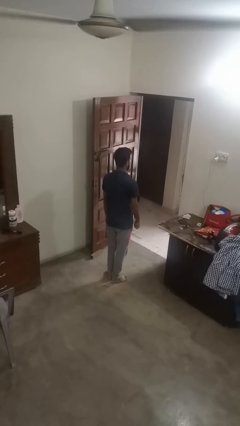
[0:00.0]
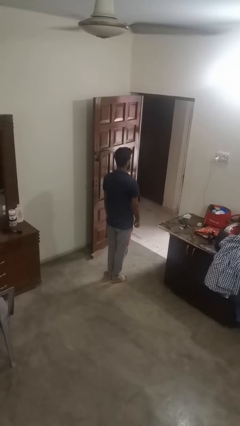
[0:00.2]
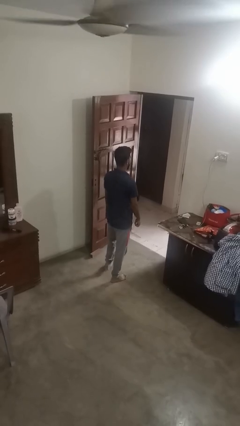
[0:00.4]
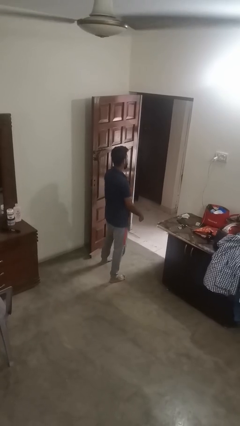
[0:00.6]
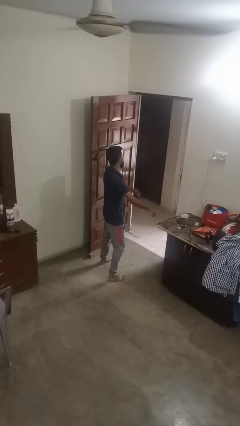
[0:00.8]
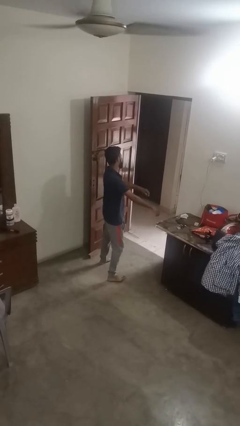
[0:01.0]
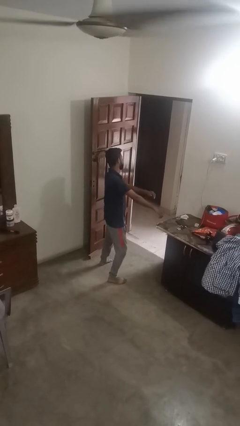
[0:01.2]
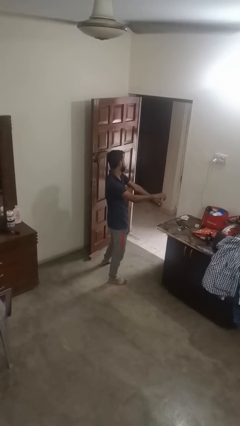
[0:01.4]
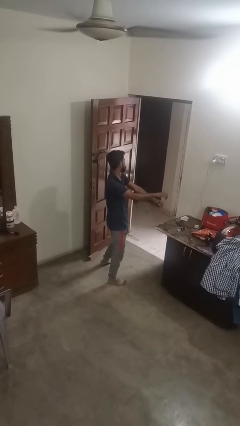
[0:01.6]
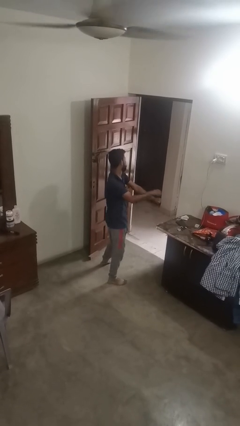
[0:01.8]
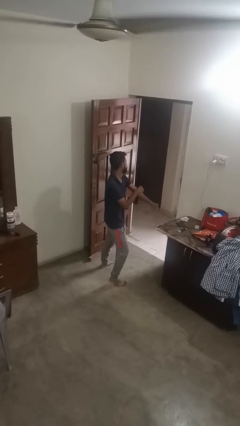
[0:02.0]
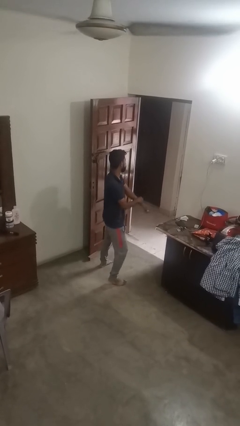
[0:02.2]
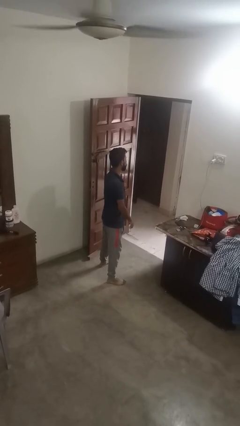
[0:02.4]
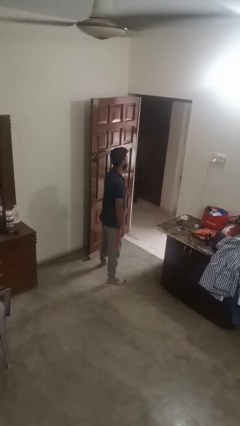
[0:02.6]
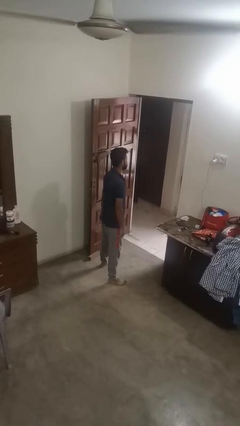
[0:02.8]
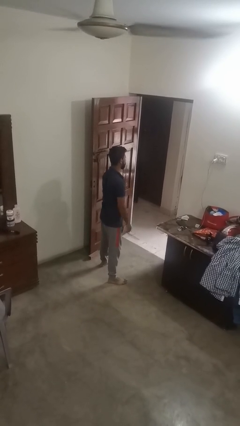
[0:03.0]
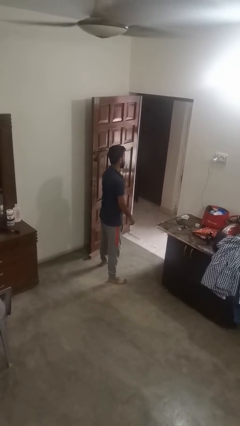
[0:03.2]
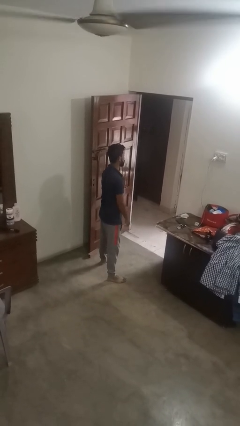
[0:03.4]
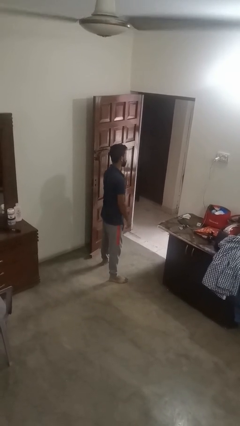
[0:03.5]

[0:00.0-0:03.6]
person dances in place

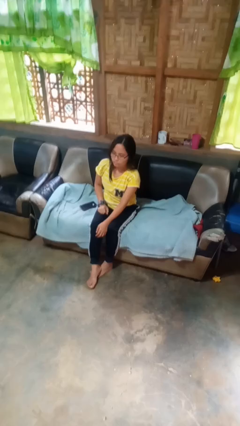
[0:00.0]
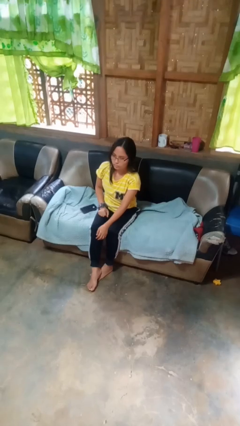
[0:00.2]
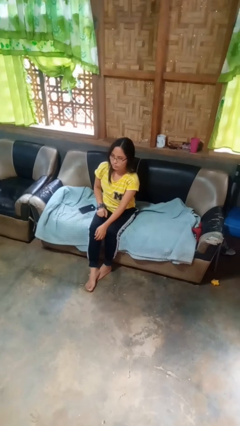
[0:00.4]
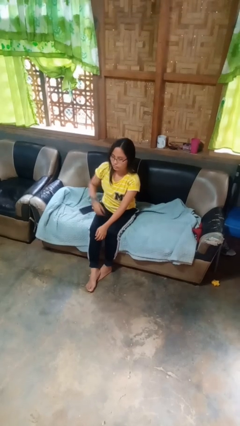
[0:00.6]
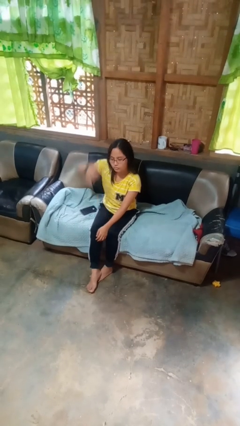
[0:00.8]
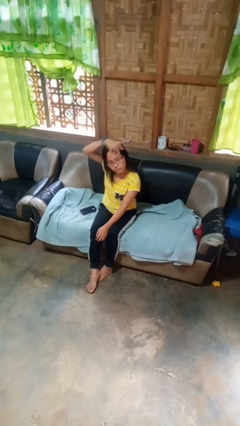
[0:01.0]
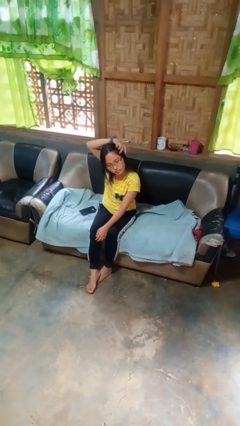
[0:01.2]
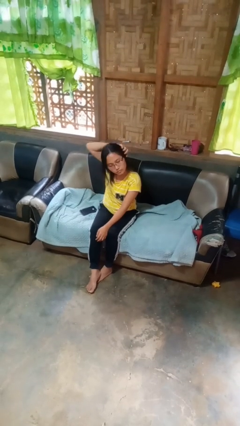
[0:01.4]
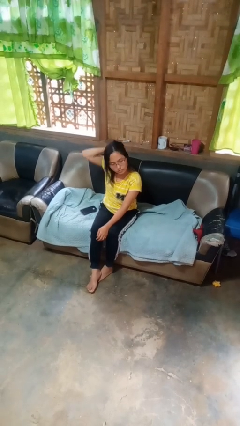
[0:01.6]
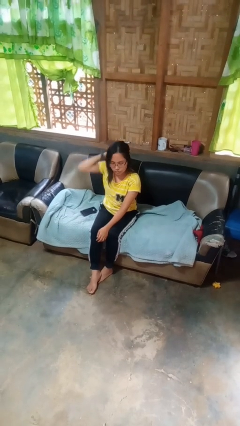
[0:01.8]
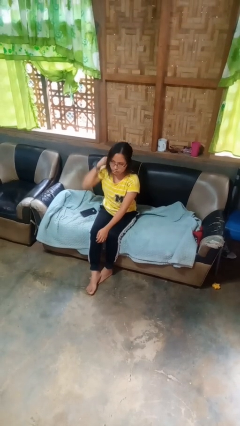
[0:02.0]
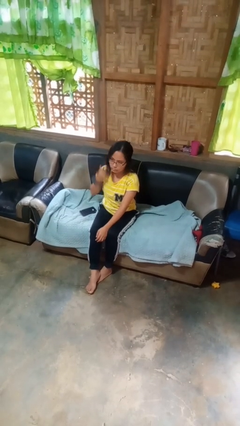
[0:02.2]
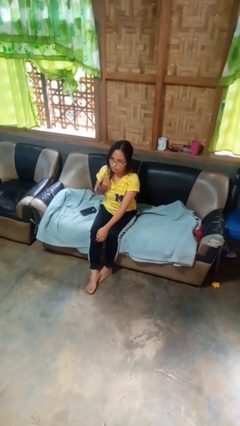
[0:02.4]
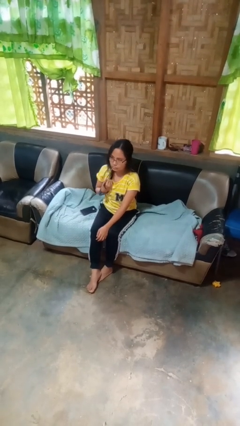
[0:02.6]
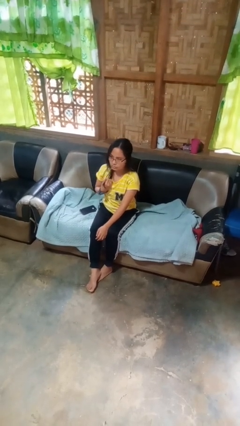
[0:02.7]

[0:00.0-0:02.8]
person strokes hair

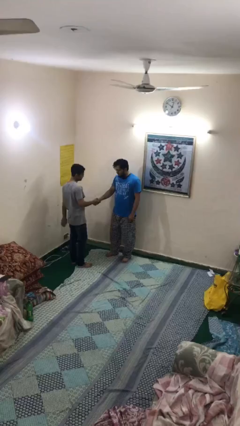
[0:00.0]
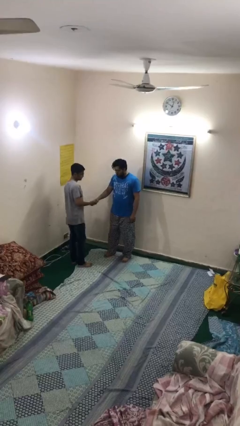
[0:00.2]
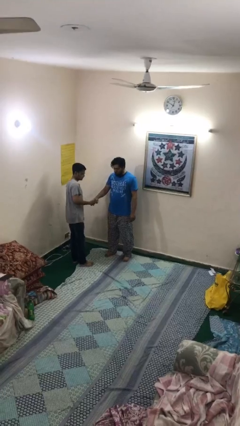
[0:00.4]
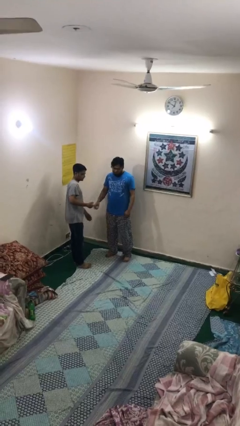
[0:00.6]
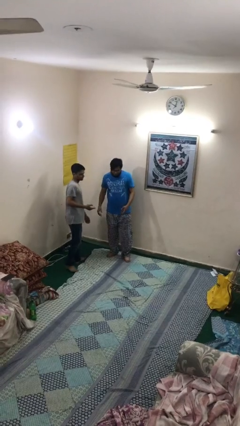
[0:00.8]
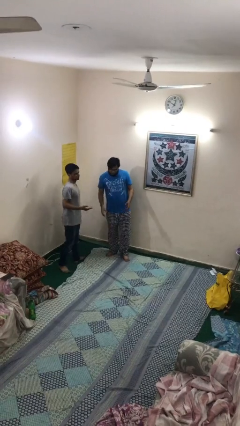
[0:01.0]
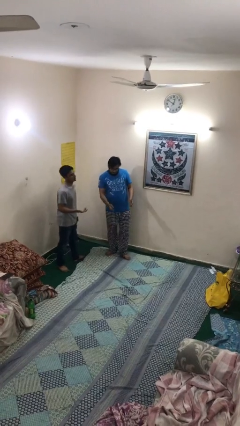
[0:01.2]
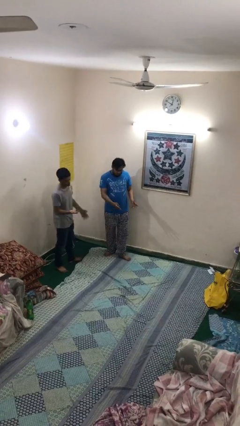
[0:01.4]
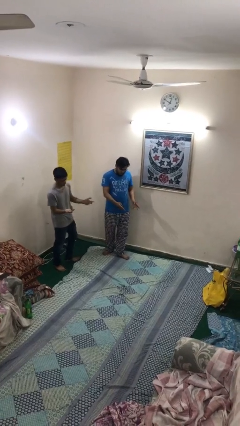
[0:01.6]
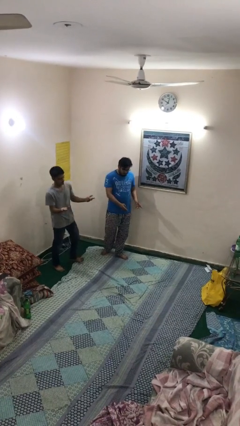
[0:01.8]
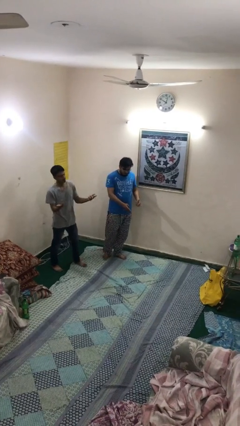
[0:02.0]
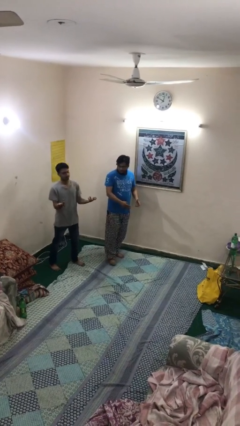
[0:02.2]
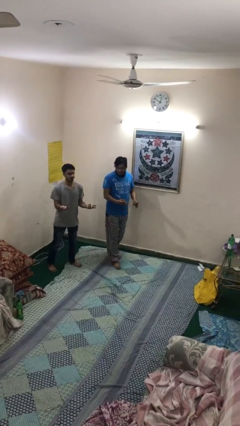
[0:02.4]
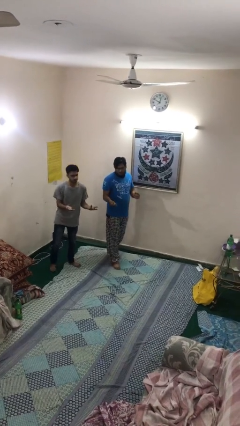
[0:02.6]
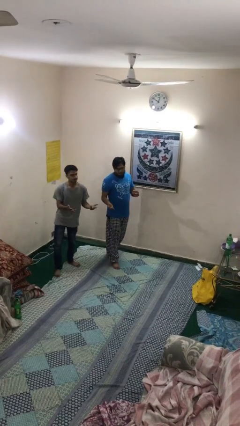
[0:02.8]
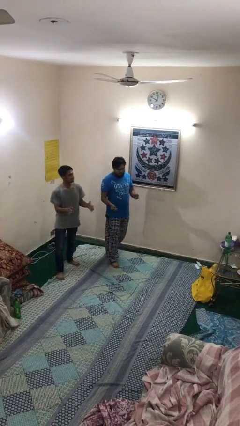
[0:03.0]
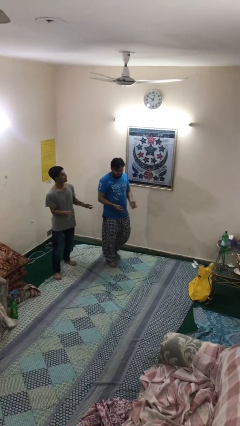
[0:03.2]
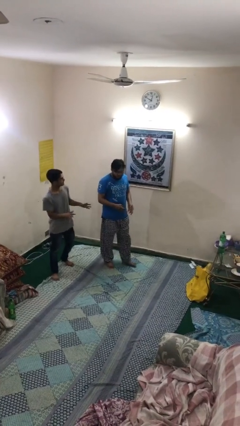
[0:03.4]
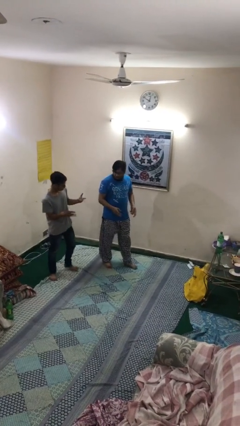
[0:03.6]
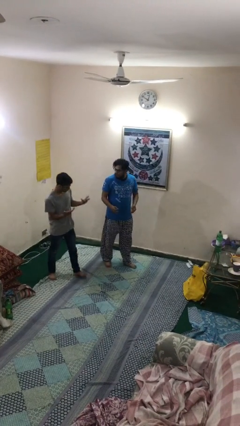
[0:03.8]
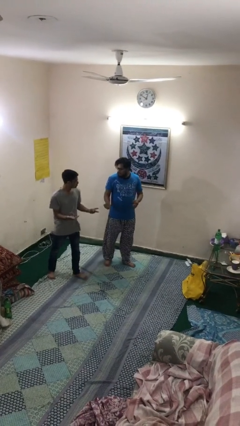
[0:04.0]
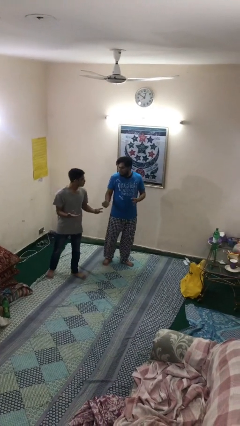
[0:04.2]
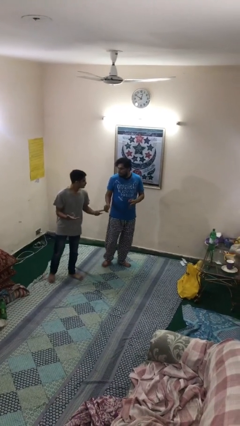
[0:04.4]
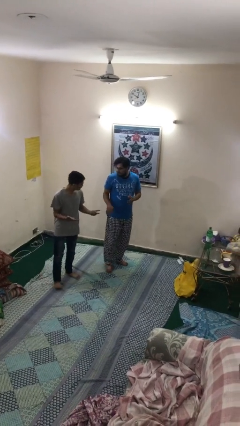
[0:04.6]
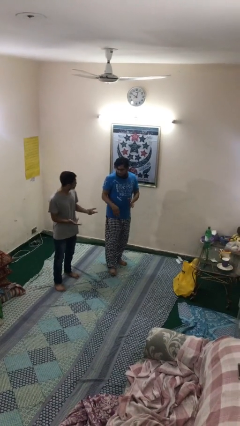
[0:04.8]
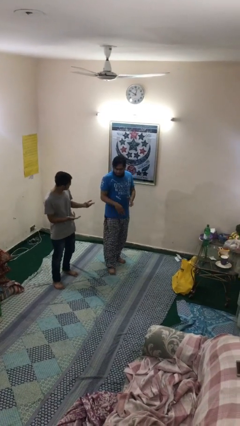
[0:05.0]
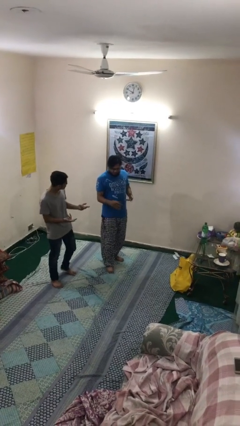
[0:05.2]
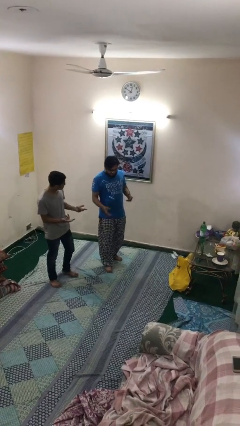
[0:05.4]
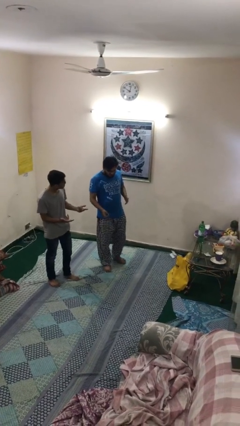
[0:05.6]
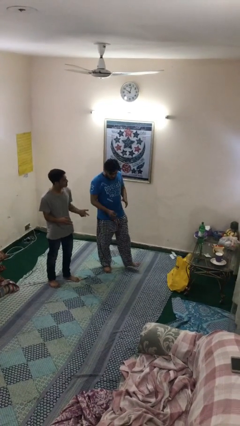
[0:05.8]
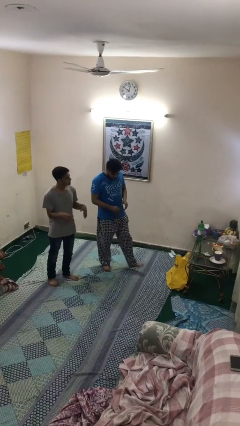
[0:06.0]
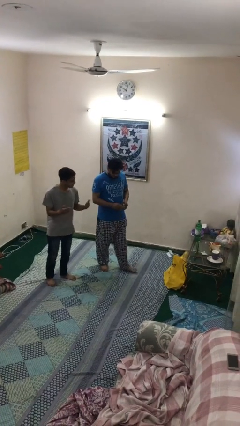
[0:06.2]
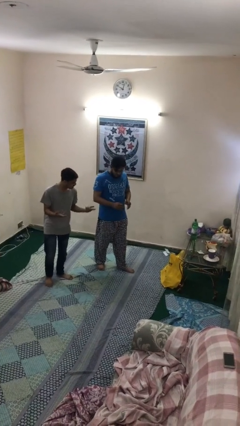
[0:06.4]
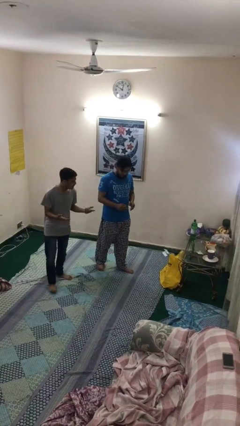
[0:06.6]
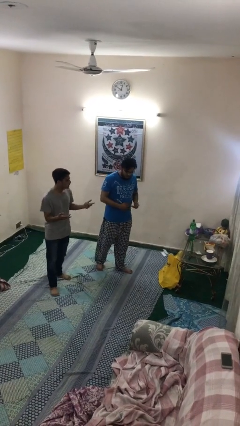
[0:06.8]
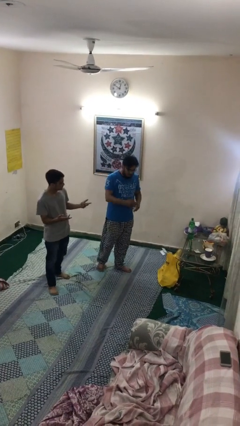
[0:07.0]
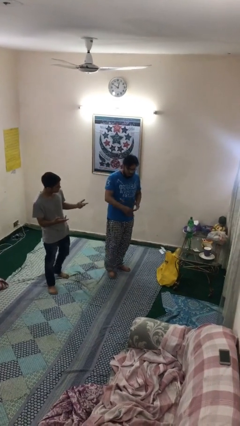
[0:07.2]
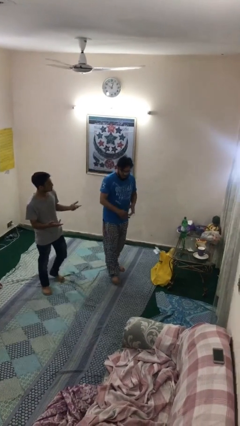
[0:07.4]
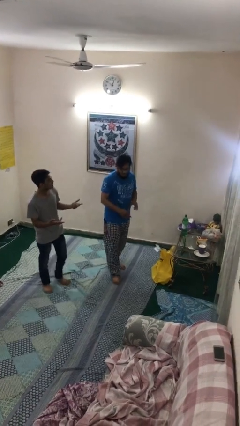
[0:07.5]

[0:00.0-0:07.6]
person talks to person

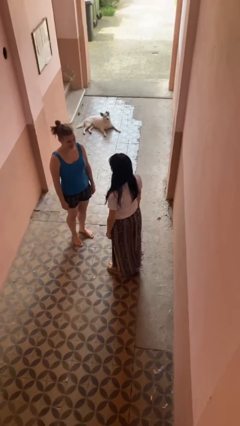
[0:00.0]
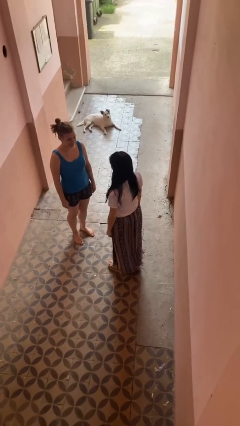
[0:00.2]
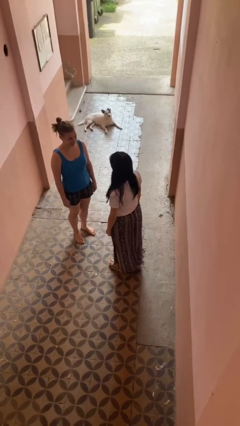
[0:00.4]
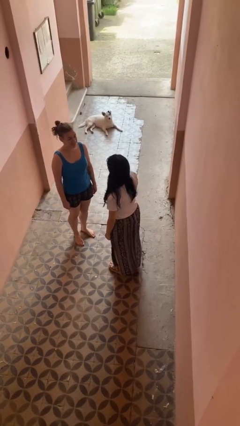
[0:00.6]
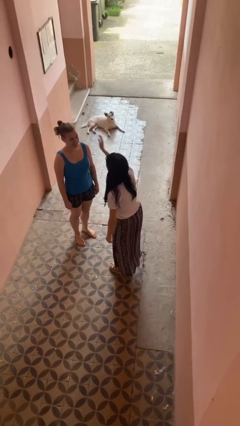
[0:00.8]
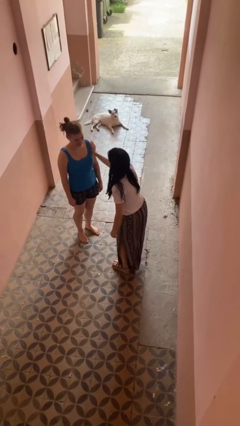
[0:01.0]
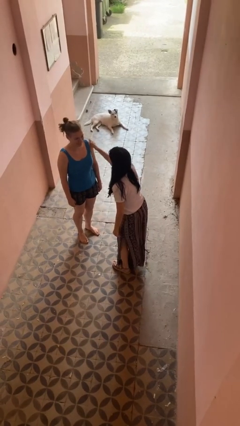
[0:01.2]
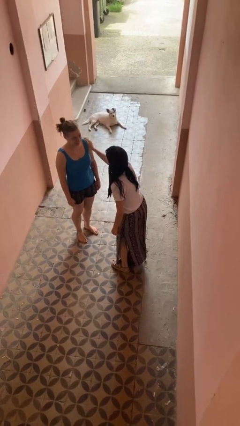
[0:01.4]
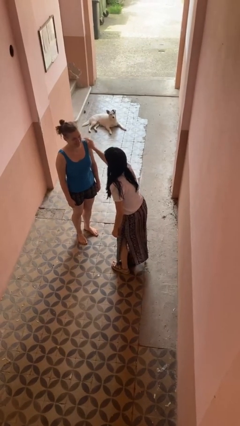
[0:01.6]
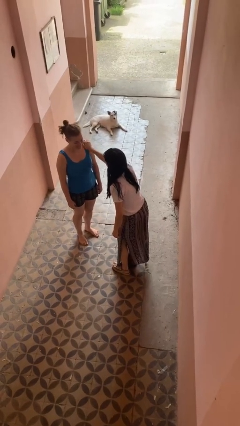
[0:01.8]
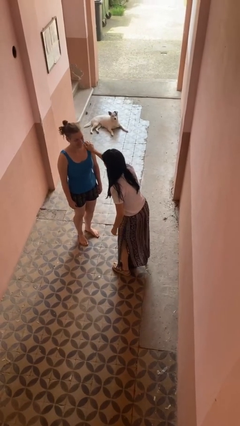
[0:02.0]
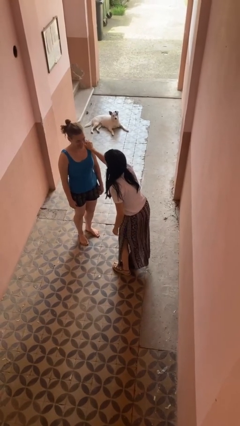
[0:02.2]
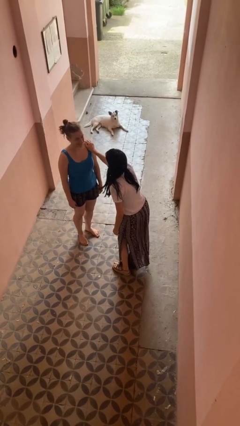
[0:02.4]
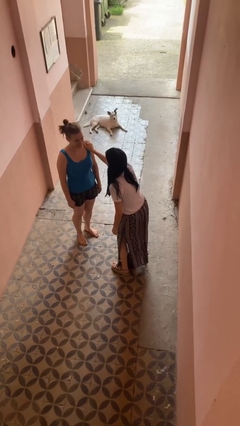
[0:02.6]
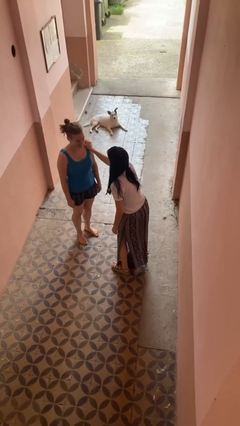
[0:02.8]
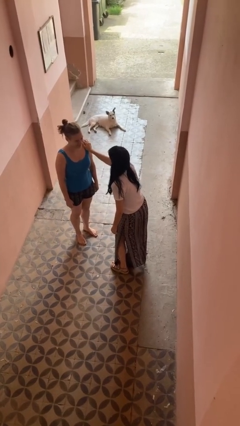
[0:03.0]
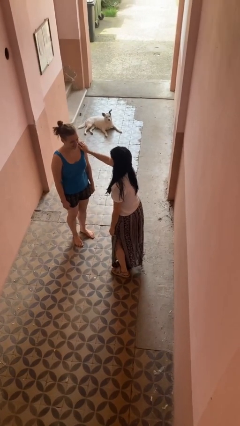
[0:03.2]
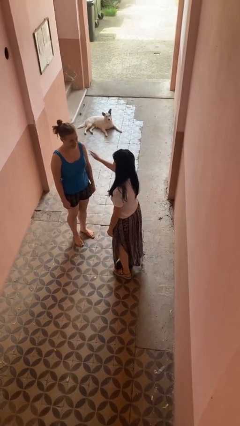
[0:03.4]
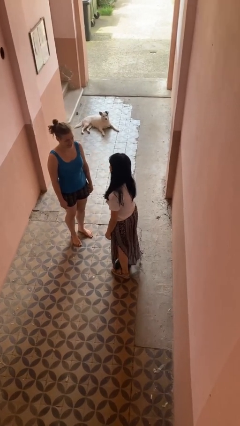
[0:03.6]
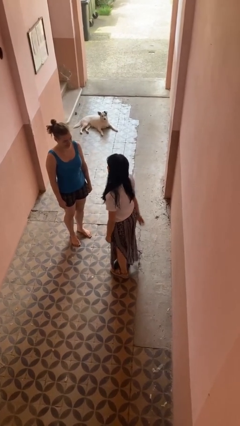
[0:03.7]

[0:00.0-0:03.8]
person pounds shoulders of person
